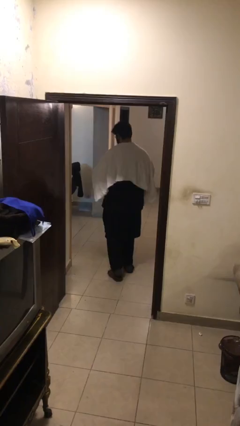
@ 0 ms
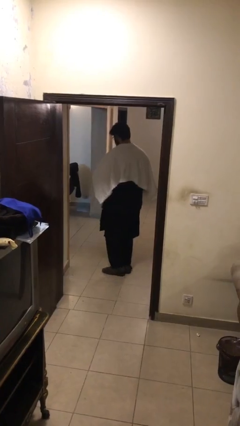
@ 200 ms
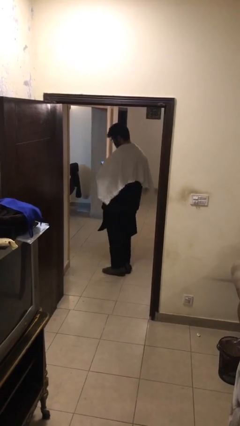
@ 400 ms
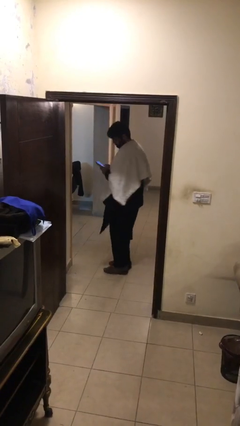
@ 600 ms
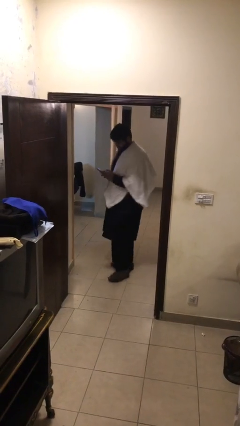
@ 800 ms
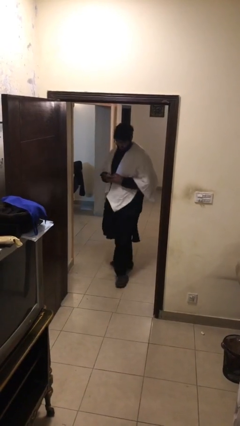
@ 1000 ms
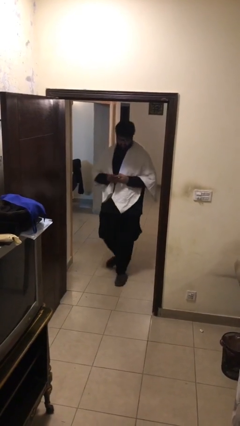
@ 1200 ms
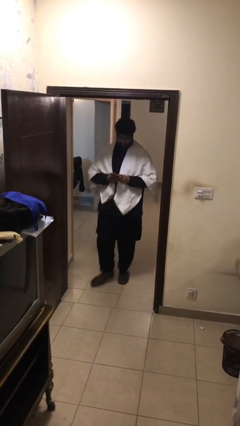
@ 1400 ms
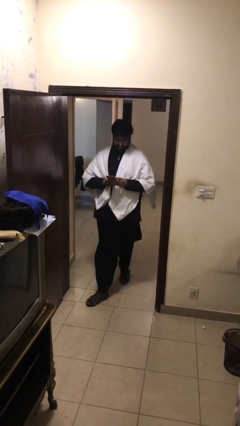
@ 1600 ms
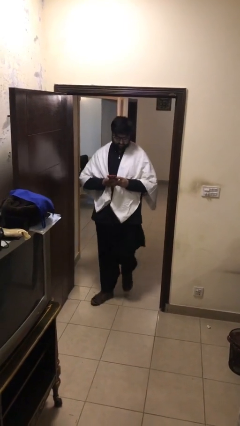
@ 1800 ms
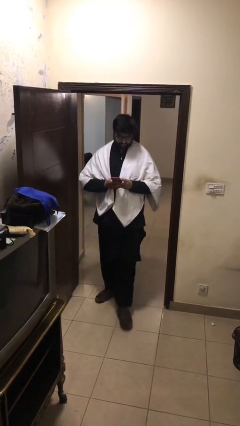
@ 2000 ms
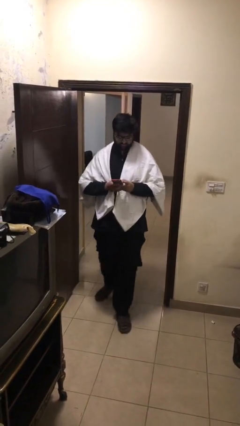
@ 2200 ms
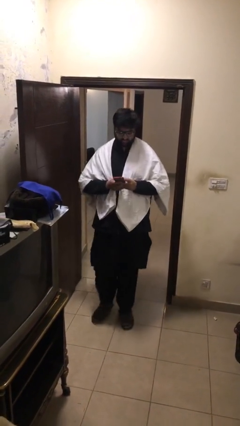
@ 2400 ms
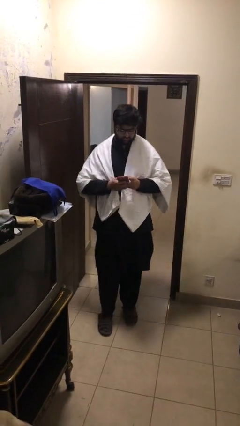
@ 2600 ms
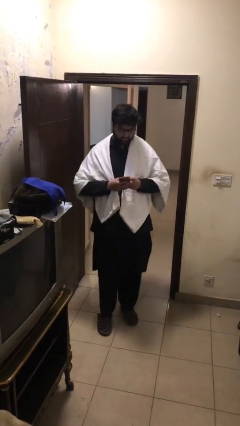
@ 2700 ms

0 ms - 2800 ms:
person enters scene through structure

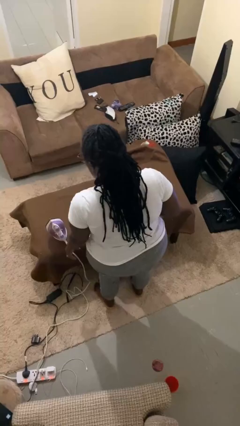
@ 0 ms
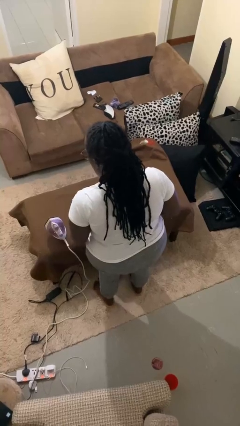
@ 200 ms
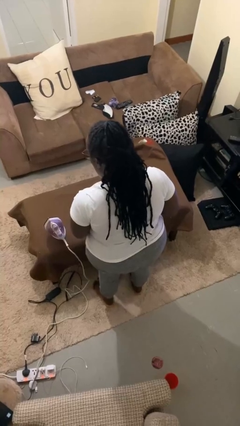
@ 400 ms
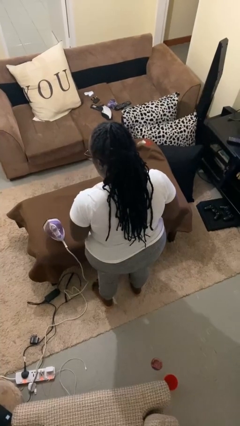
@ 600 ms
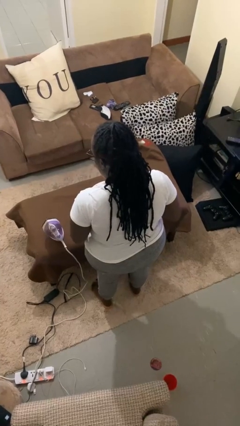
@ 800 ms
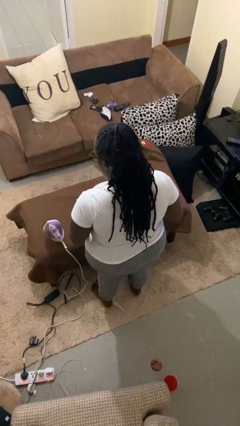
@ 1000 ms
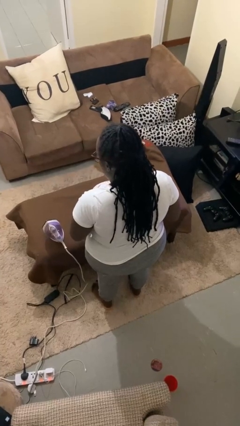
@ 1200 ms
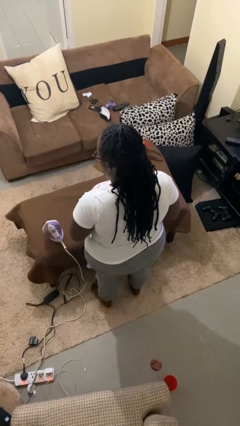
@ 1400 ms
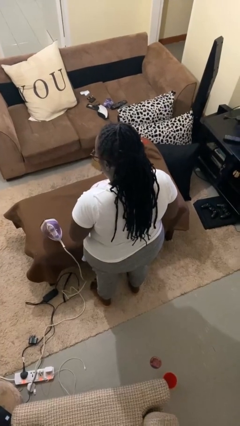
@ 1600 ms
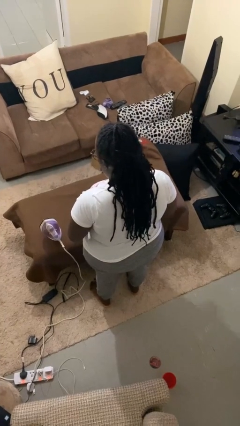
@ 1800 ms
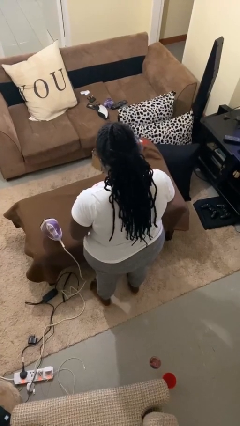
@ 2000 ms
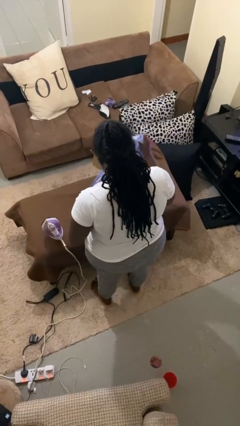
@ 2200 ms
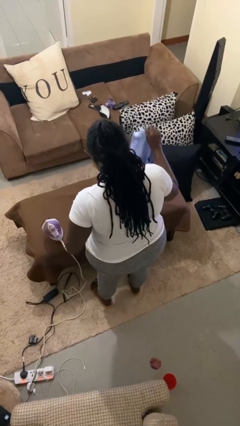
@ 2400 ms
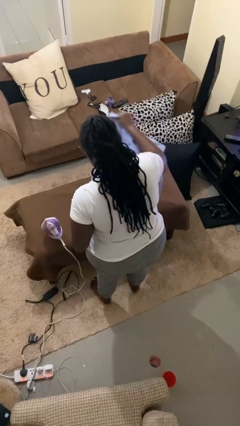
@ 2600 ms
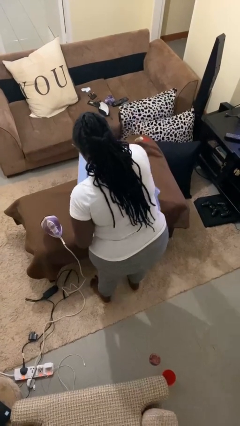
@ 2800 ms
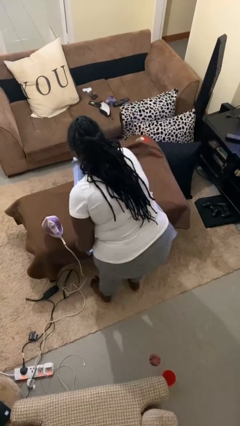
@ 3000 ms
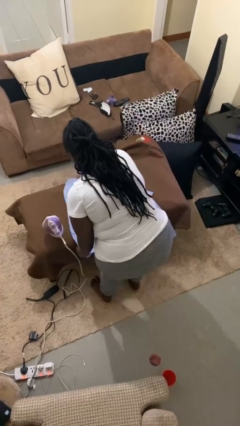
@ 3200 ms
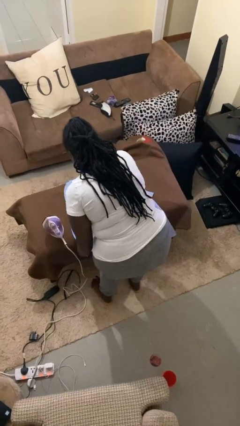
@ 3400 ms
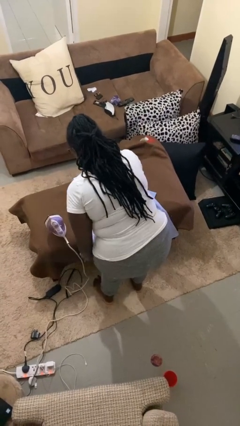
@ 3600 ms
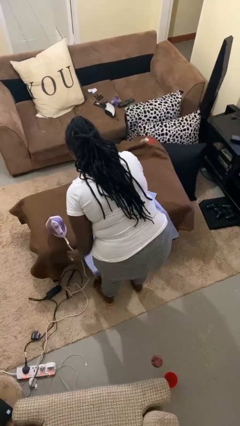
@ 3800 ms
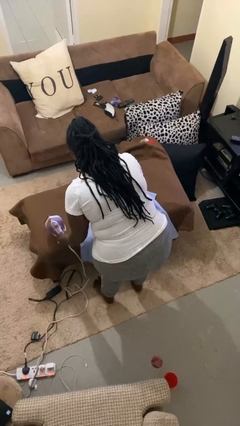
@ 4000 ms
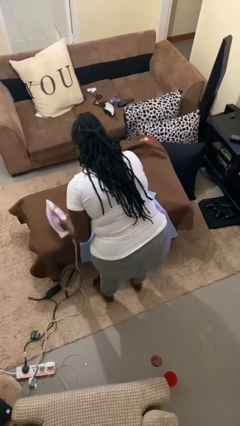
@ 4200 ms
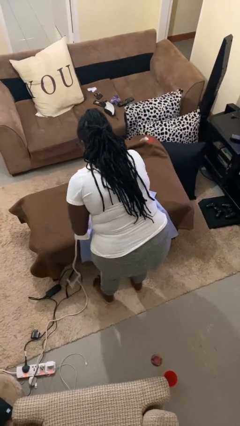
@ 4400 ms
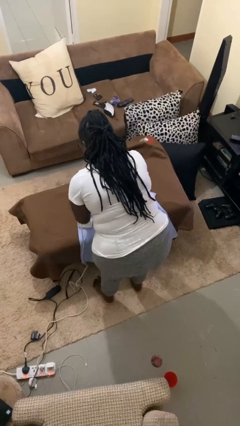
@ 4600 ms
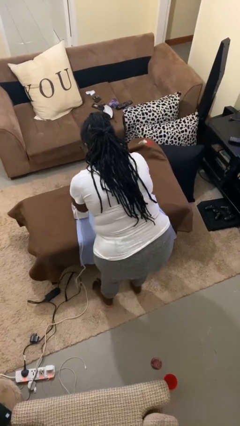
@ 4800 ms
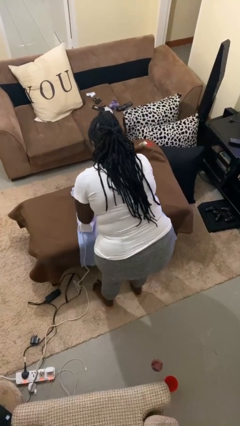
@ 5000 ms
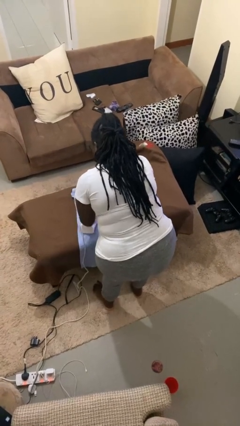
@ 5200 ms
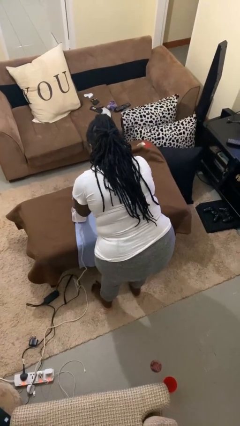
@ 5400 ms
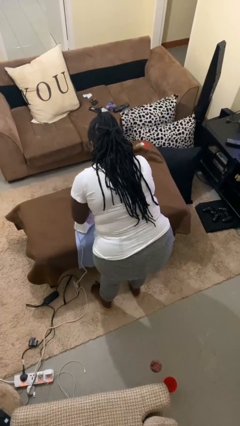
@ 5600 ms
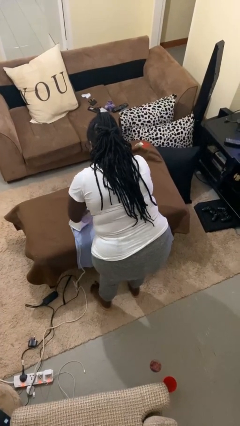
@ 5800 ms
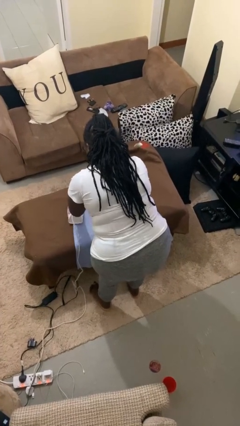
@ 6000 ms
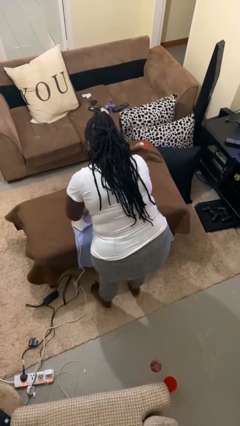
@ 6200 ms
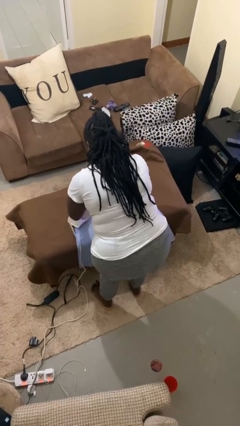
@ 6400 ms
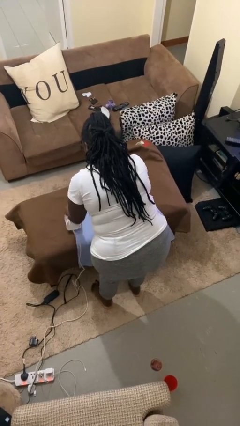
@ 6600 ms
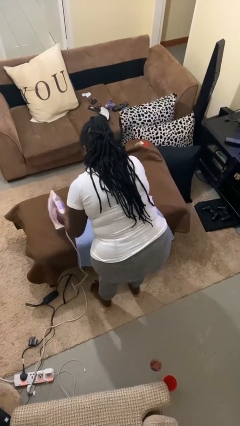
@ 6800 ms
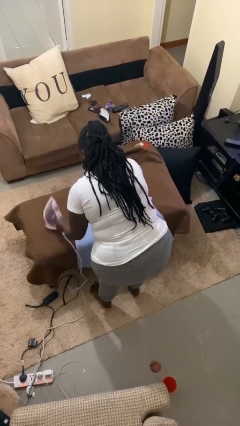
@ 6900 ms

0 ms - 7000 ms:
person irons clothes

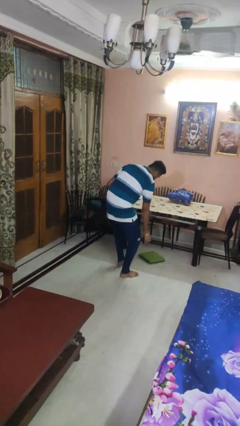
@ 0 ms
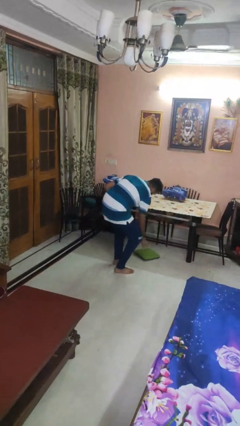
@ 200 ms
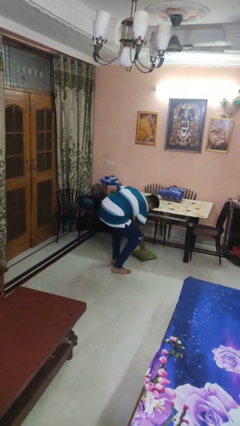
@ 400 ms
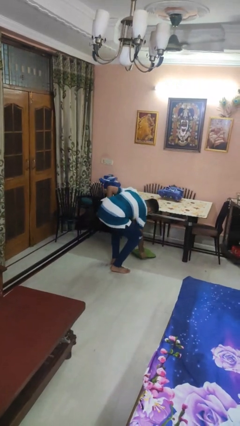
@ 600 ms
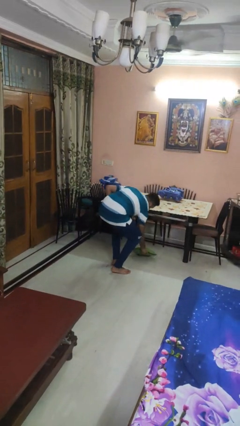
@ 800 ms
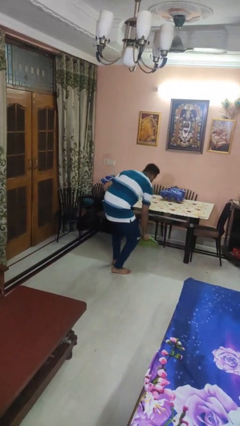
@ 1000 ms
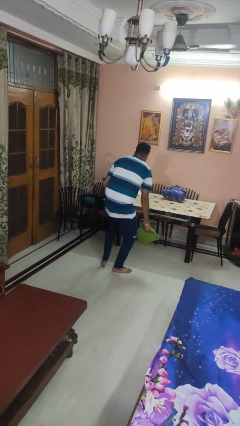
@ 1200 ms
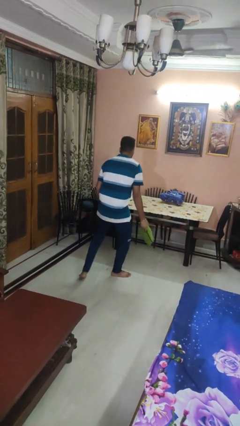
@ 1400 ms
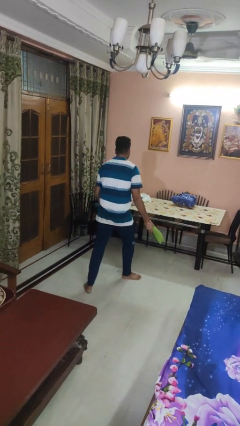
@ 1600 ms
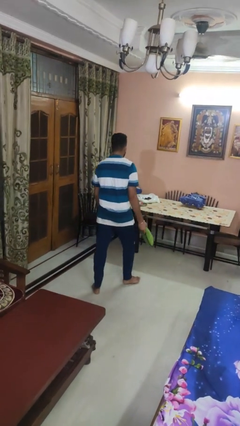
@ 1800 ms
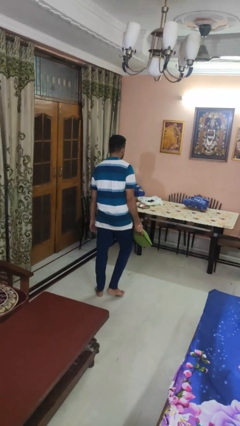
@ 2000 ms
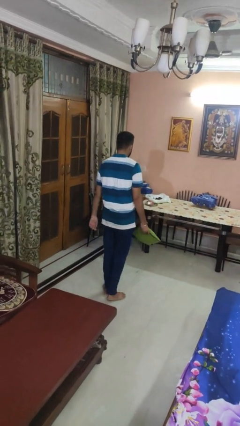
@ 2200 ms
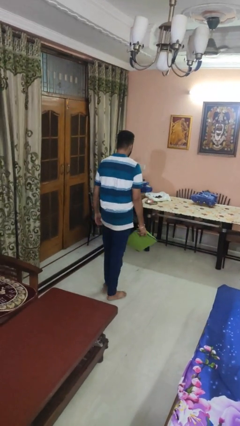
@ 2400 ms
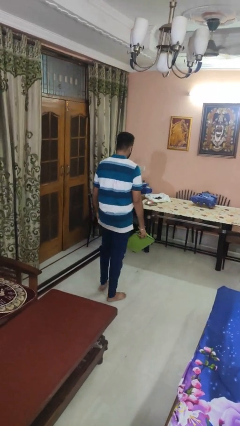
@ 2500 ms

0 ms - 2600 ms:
person picks up object from floor

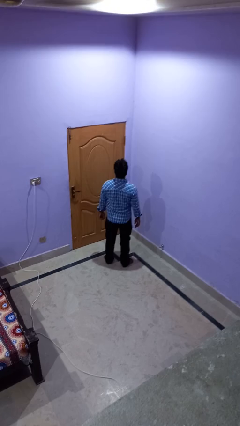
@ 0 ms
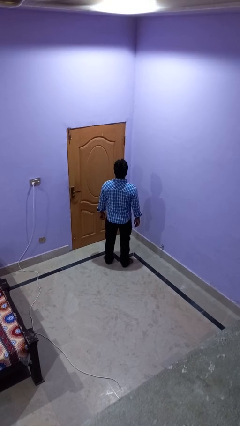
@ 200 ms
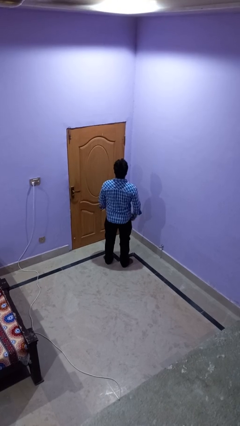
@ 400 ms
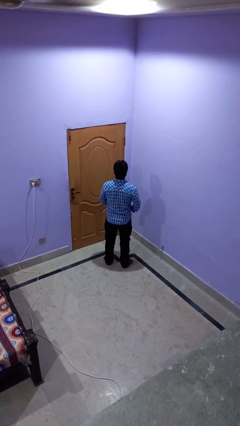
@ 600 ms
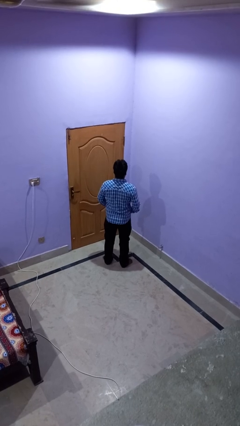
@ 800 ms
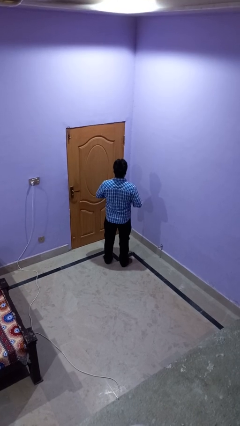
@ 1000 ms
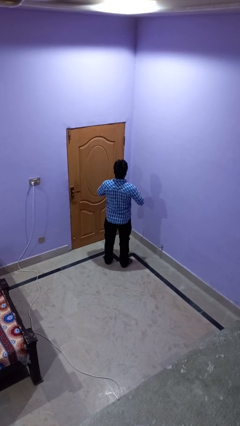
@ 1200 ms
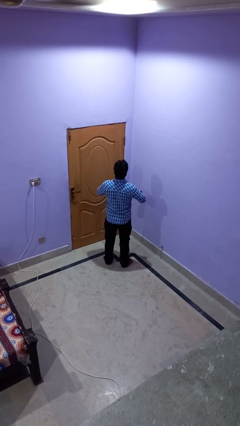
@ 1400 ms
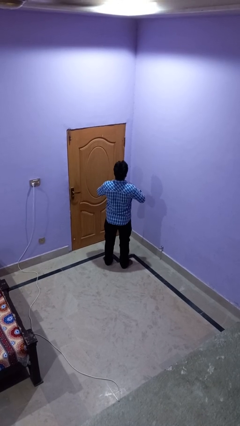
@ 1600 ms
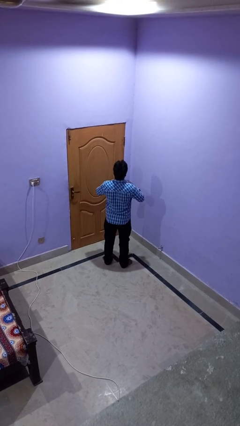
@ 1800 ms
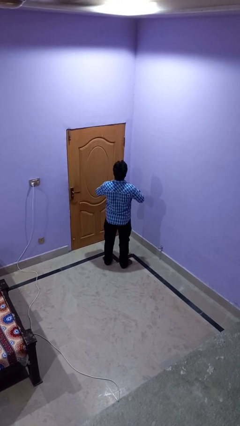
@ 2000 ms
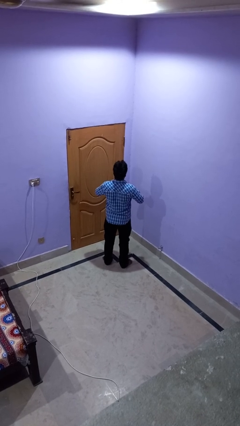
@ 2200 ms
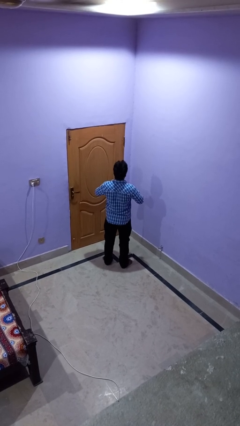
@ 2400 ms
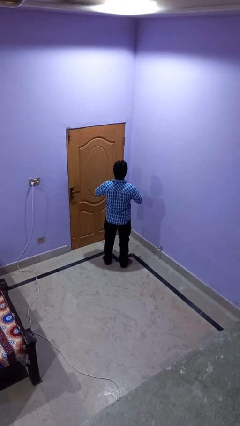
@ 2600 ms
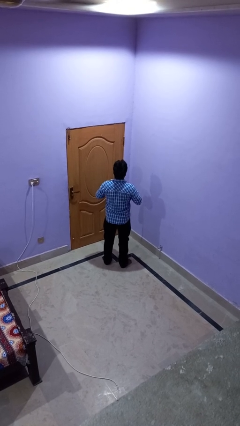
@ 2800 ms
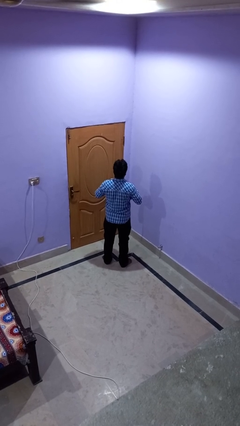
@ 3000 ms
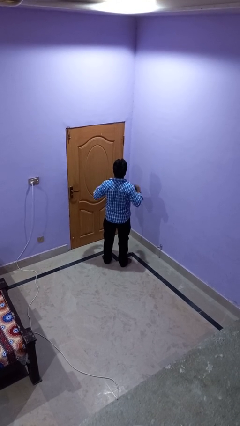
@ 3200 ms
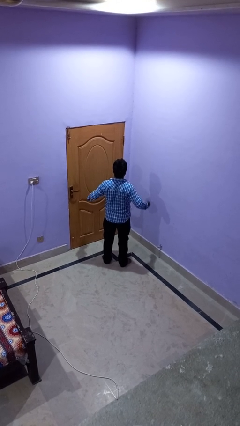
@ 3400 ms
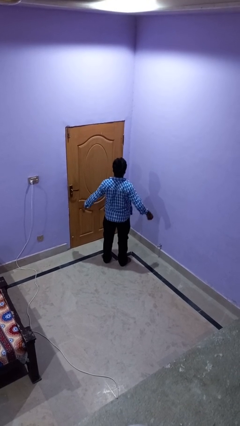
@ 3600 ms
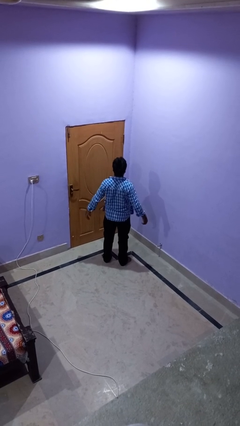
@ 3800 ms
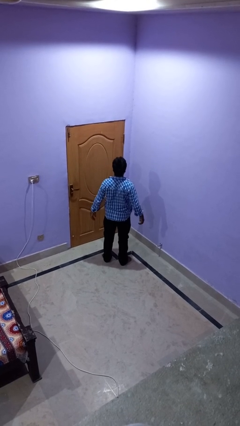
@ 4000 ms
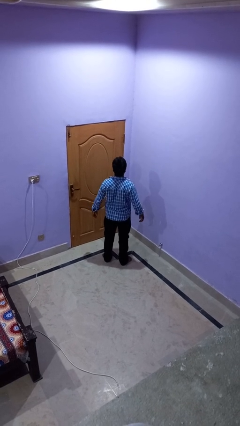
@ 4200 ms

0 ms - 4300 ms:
person unbuttons shirt

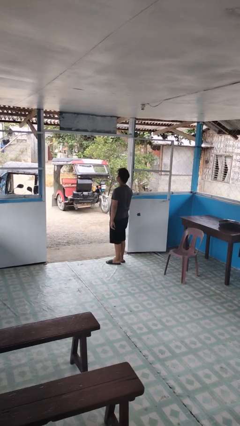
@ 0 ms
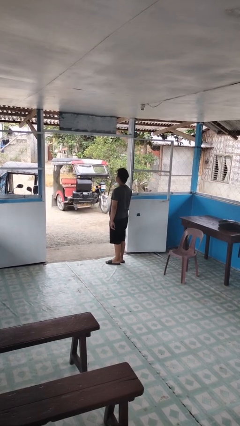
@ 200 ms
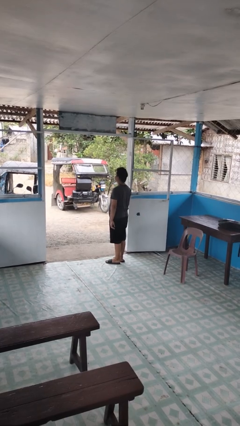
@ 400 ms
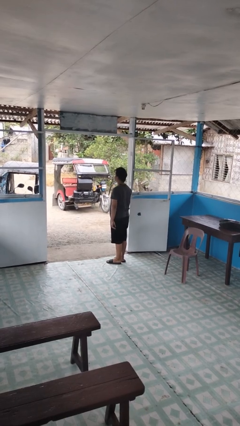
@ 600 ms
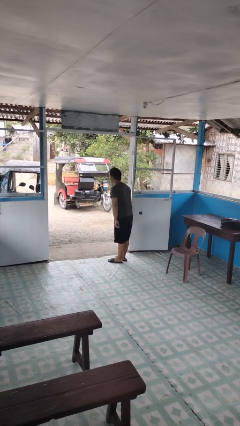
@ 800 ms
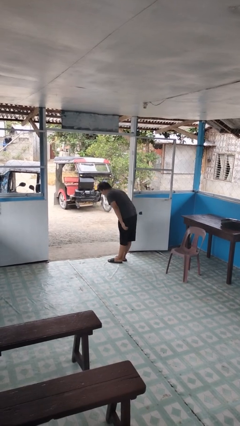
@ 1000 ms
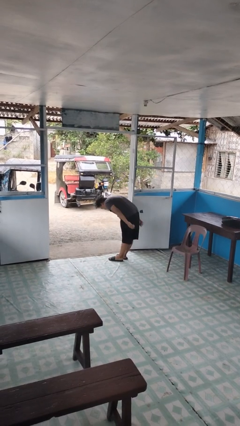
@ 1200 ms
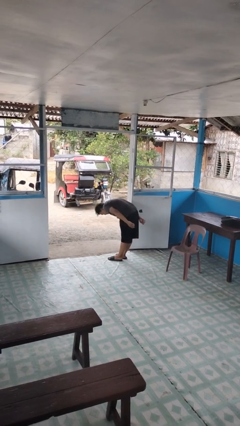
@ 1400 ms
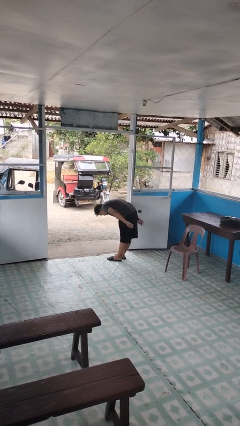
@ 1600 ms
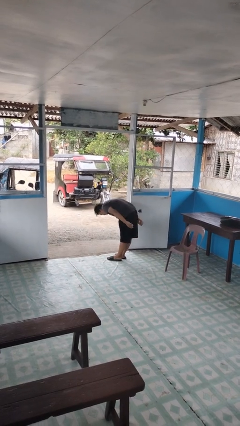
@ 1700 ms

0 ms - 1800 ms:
person bows
